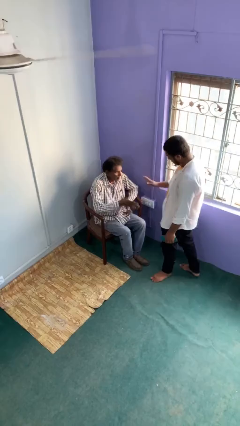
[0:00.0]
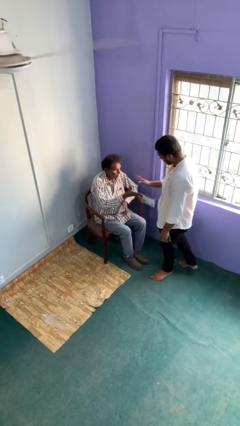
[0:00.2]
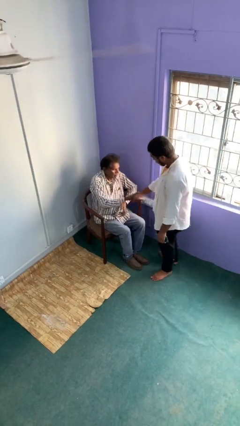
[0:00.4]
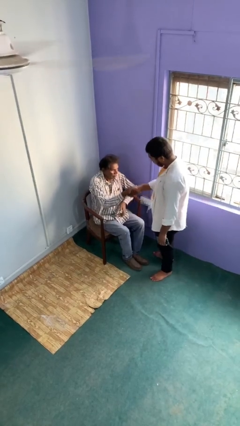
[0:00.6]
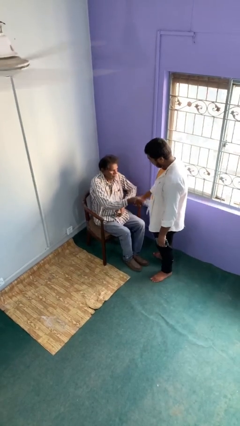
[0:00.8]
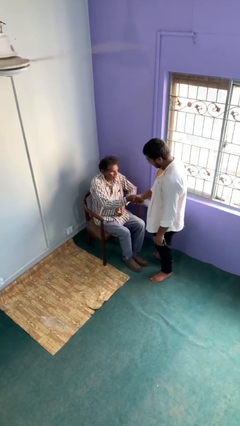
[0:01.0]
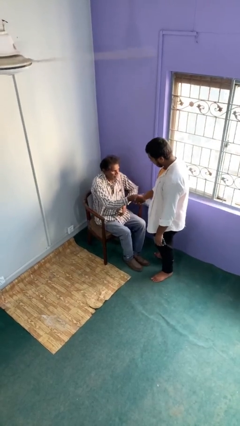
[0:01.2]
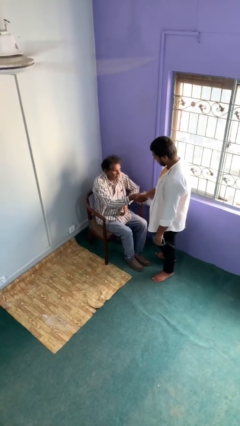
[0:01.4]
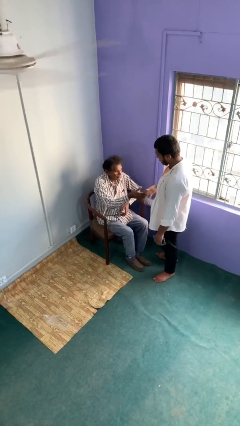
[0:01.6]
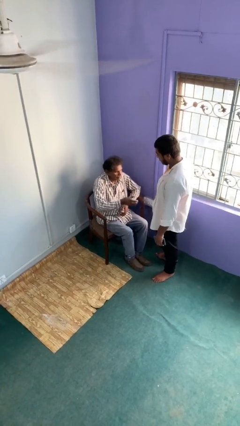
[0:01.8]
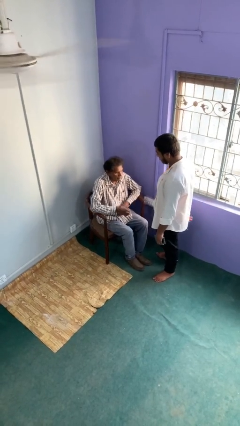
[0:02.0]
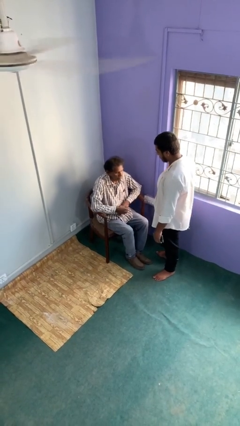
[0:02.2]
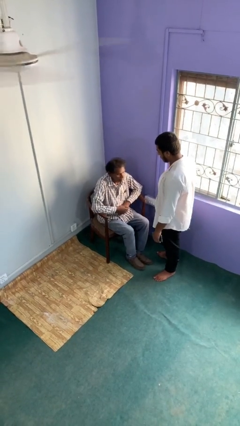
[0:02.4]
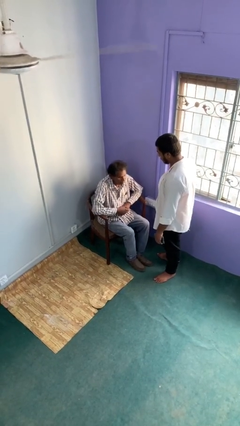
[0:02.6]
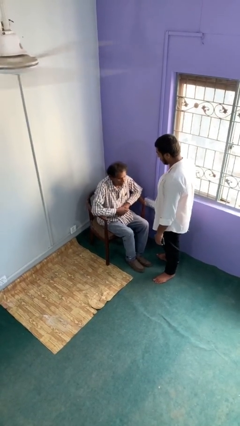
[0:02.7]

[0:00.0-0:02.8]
person shakes hand

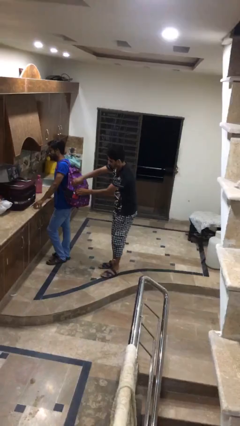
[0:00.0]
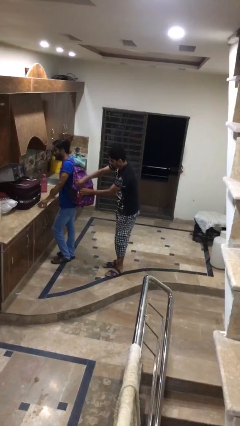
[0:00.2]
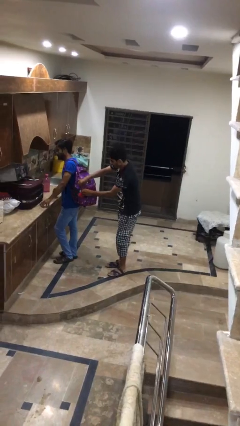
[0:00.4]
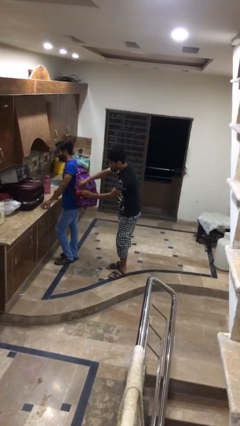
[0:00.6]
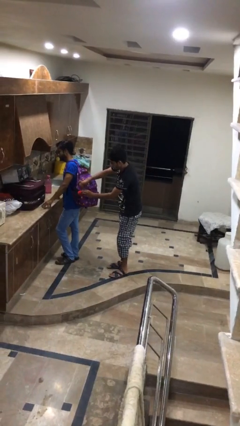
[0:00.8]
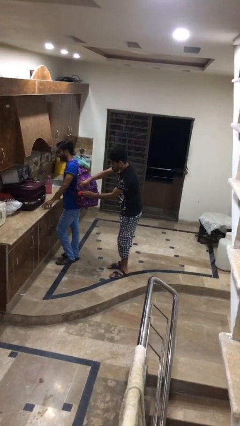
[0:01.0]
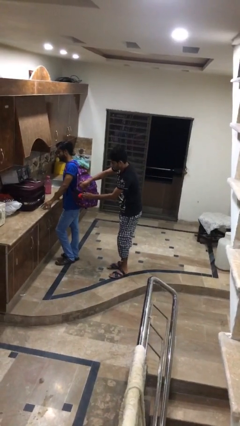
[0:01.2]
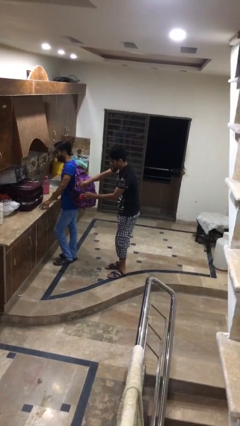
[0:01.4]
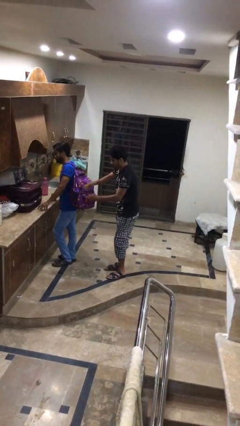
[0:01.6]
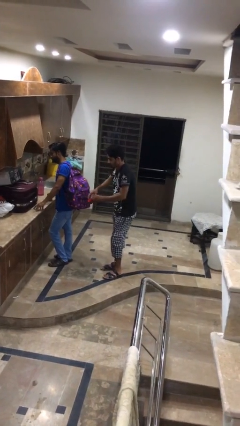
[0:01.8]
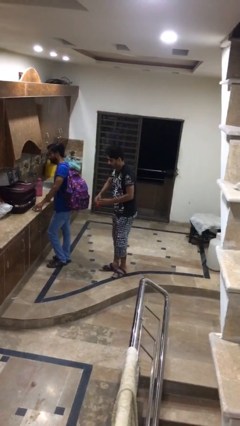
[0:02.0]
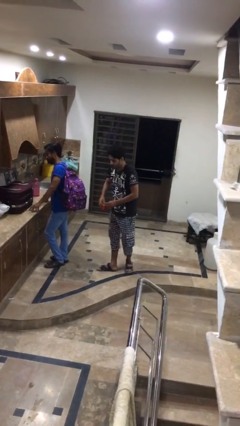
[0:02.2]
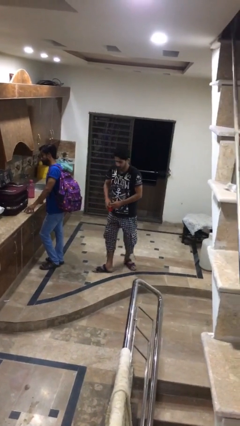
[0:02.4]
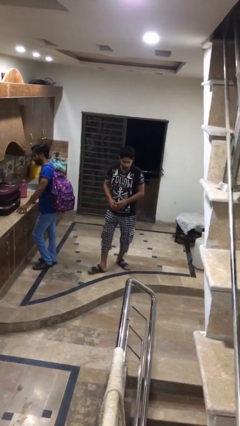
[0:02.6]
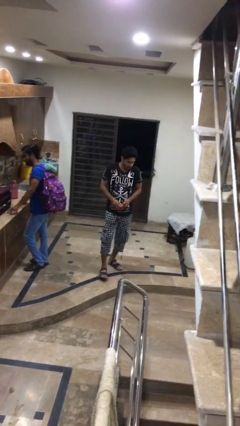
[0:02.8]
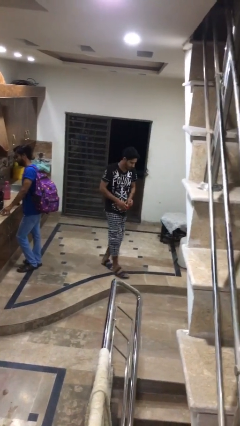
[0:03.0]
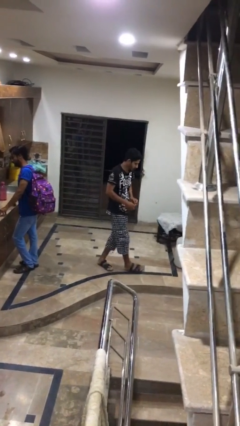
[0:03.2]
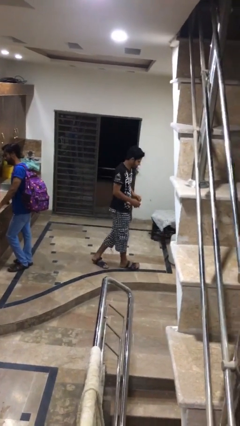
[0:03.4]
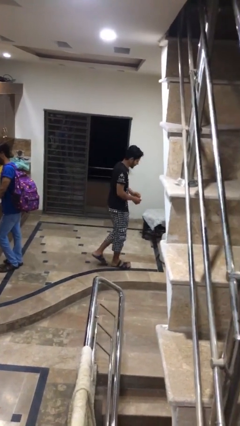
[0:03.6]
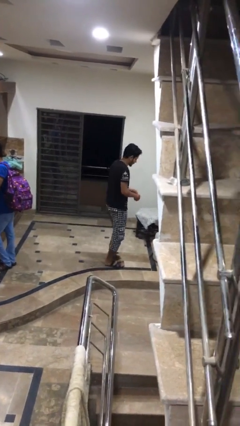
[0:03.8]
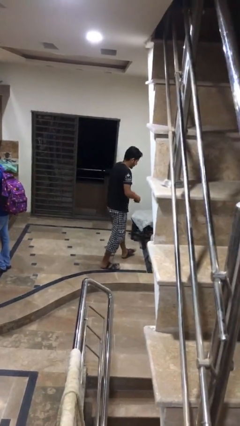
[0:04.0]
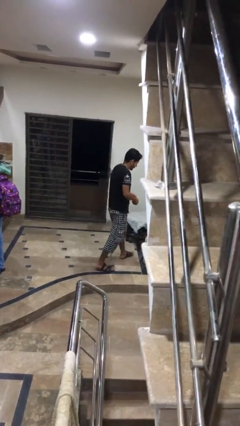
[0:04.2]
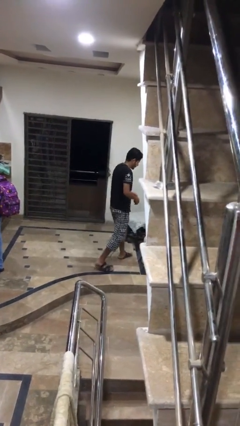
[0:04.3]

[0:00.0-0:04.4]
person steals object from person

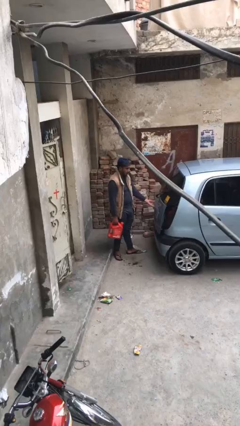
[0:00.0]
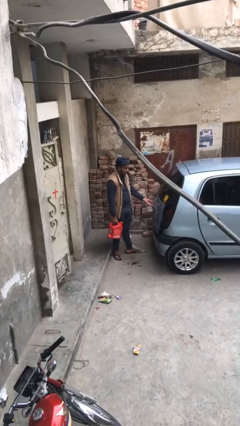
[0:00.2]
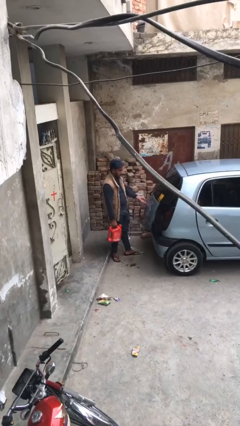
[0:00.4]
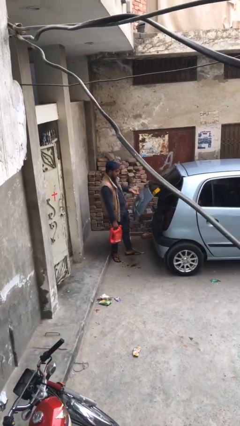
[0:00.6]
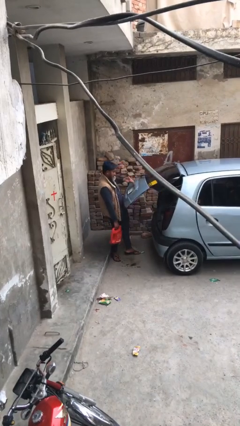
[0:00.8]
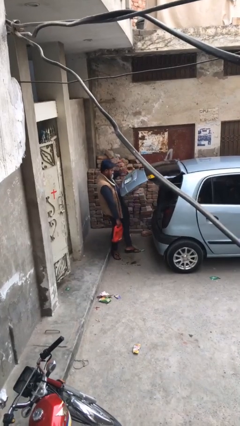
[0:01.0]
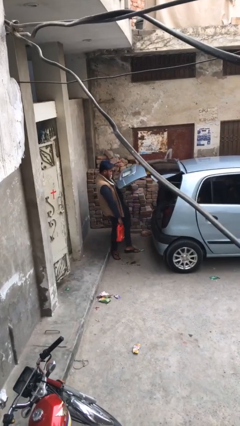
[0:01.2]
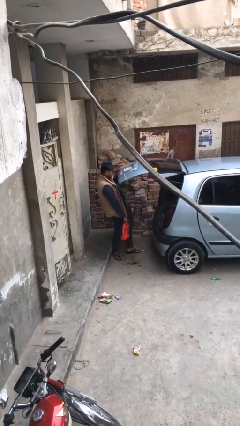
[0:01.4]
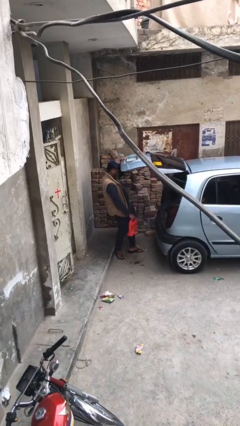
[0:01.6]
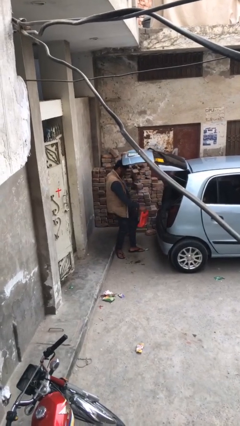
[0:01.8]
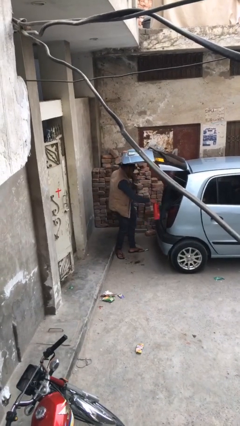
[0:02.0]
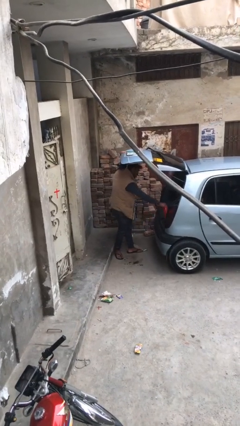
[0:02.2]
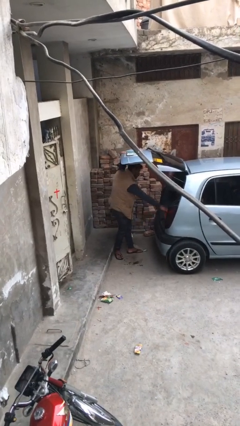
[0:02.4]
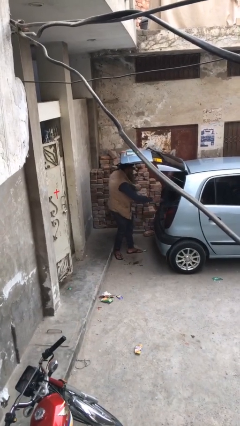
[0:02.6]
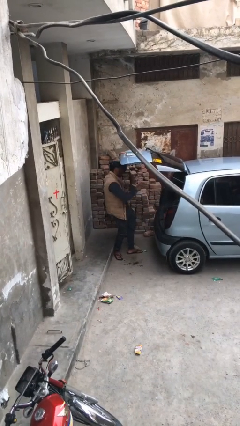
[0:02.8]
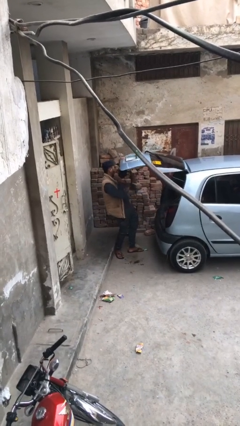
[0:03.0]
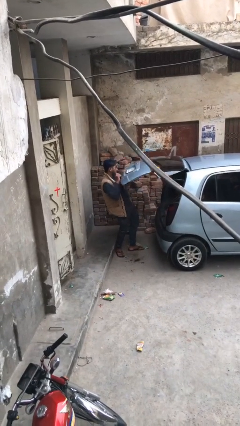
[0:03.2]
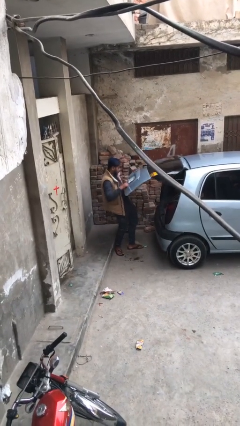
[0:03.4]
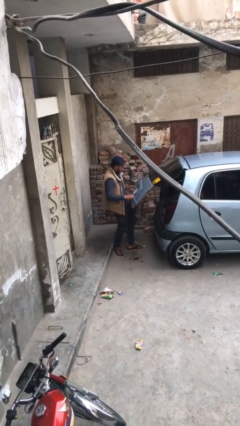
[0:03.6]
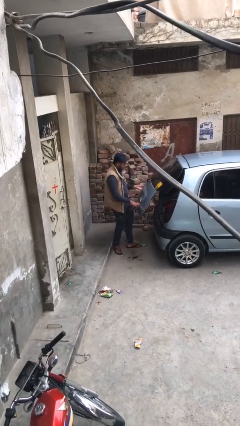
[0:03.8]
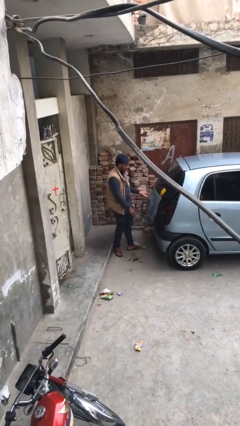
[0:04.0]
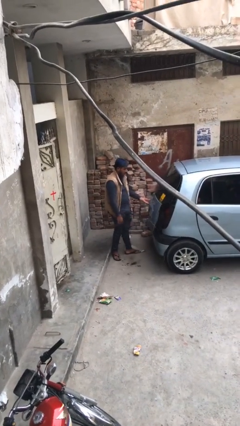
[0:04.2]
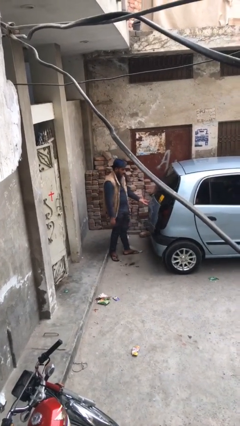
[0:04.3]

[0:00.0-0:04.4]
person loads car

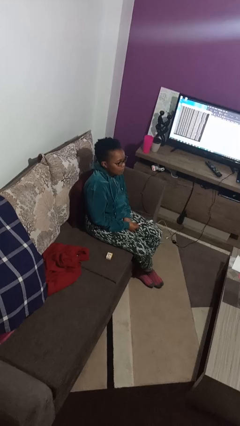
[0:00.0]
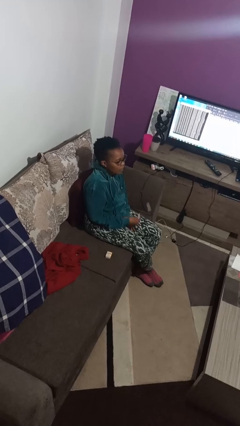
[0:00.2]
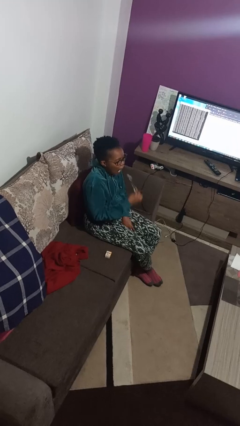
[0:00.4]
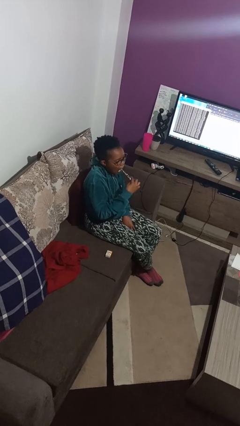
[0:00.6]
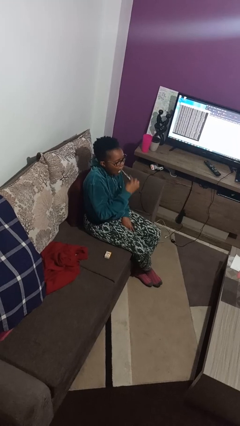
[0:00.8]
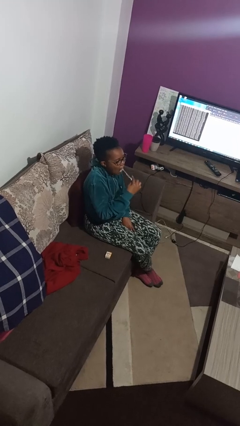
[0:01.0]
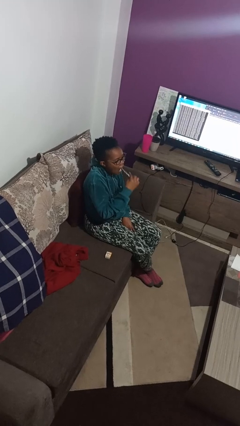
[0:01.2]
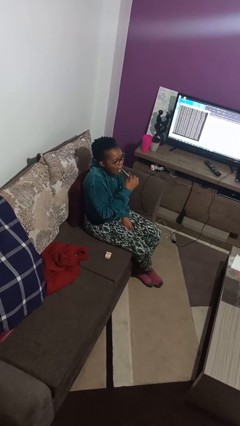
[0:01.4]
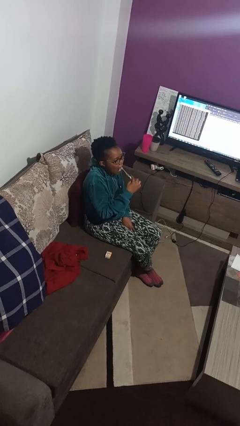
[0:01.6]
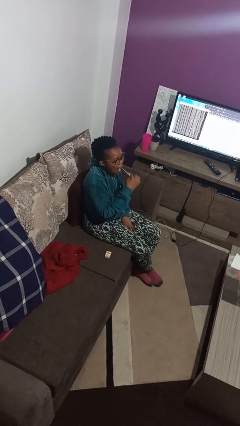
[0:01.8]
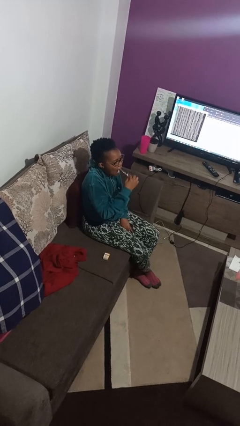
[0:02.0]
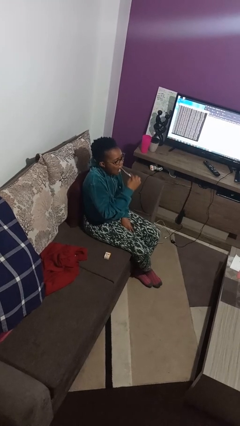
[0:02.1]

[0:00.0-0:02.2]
person brushes teeth

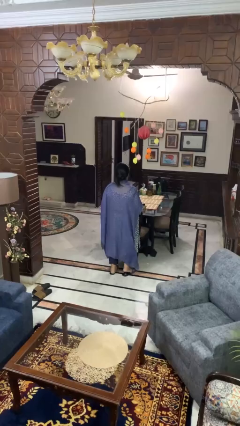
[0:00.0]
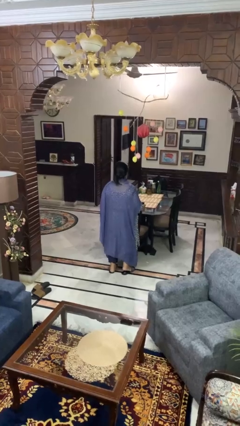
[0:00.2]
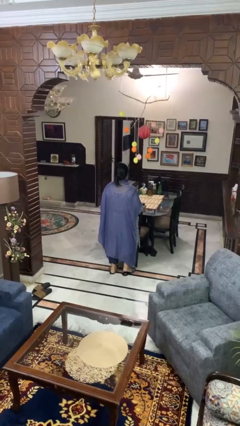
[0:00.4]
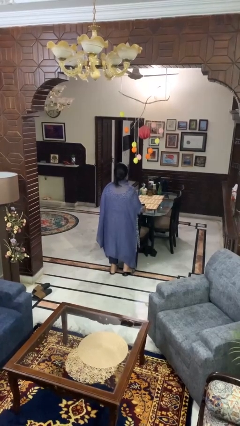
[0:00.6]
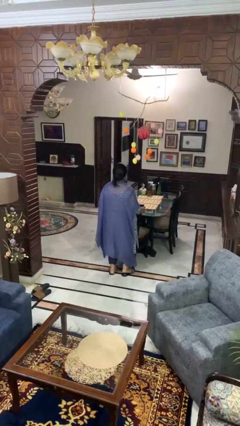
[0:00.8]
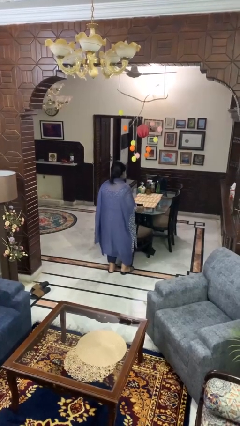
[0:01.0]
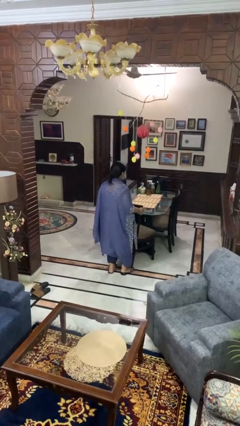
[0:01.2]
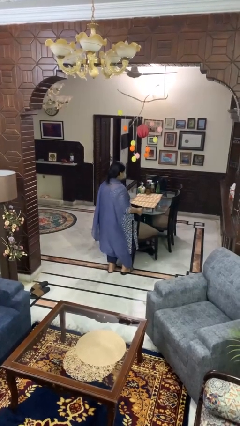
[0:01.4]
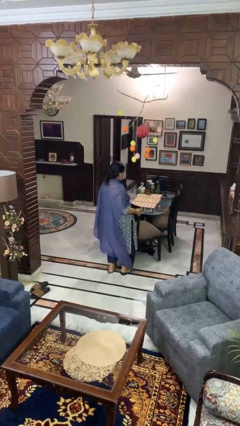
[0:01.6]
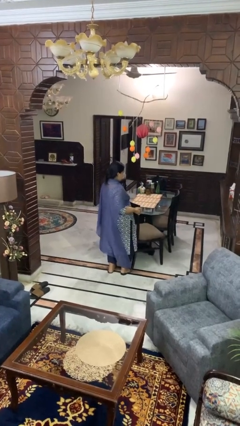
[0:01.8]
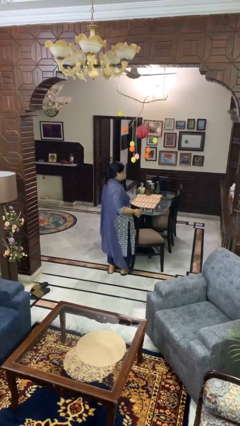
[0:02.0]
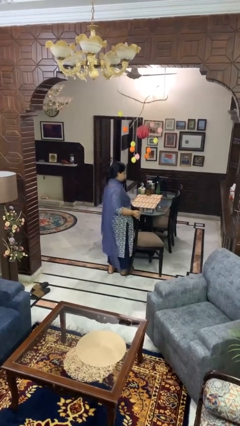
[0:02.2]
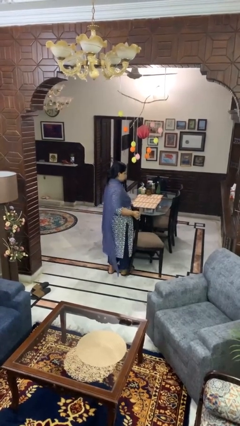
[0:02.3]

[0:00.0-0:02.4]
person pulls out chair

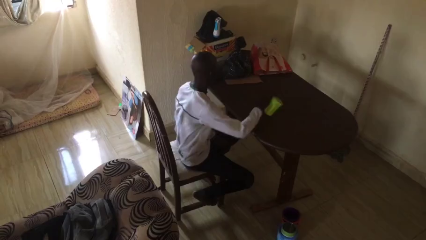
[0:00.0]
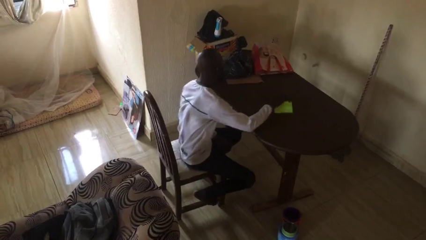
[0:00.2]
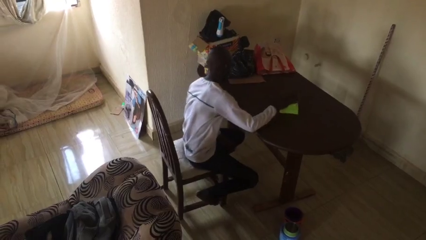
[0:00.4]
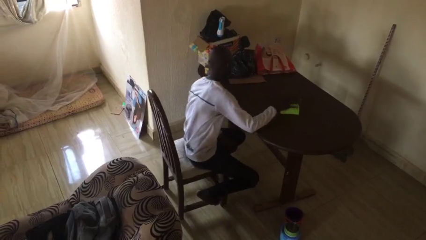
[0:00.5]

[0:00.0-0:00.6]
person knocks over glass

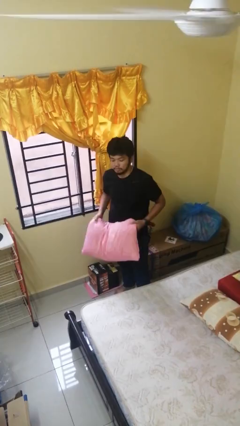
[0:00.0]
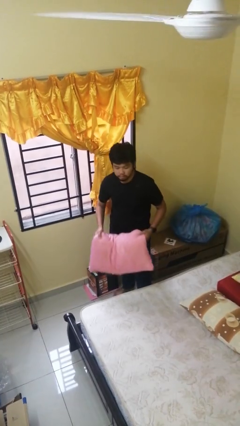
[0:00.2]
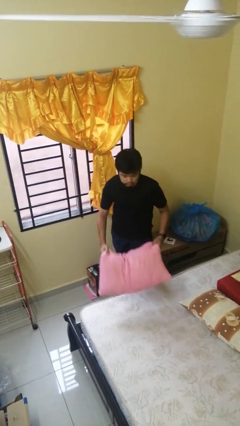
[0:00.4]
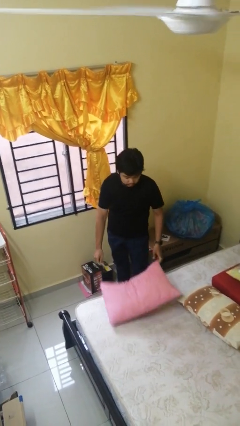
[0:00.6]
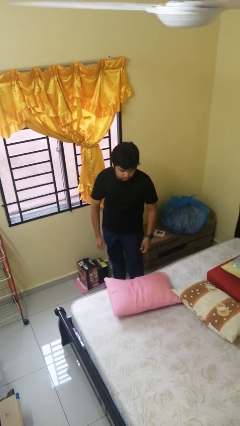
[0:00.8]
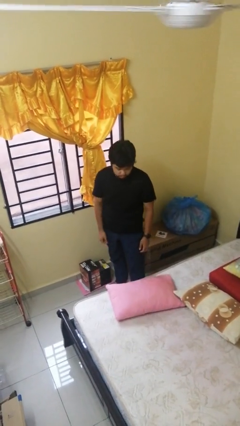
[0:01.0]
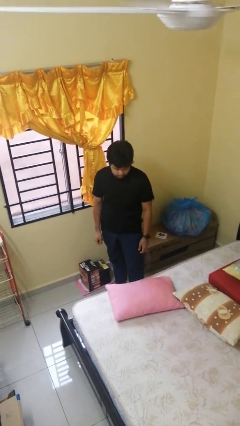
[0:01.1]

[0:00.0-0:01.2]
person puts down object on bed
